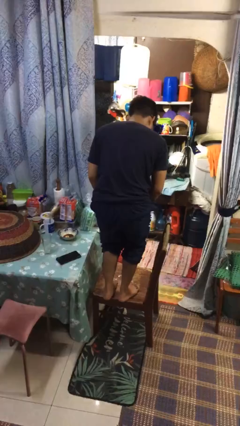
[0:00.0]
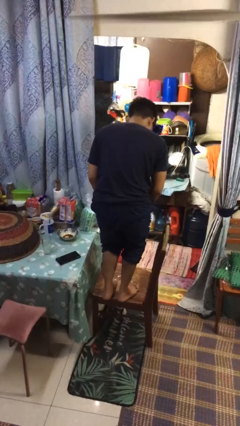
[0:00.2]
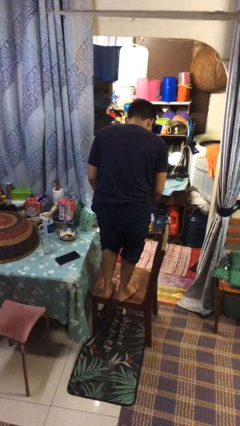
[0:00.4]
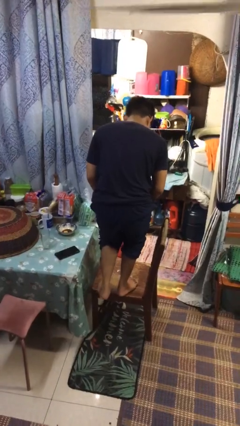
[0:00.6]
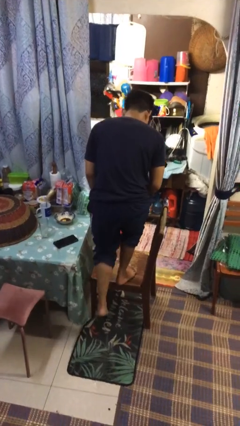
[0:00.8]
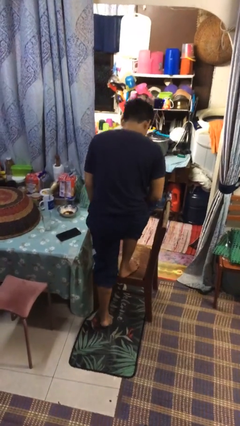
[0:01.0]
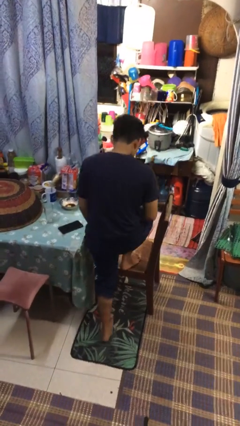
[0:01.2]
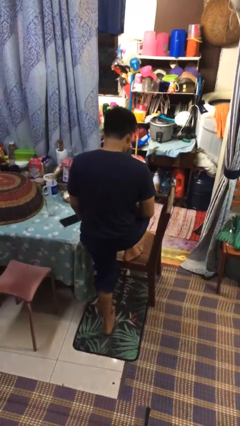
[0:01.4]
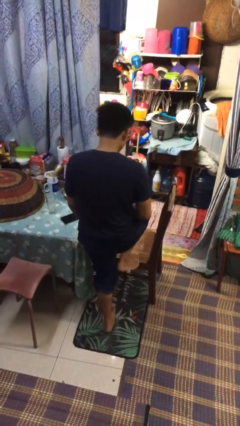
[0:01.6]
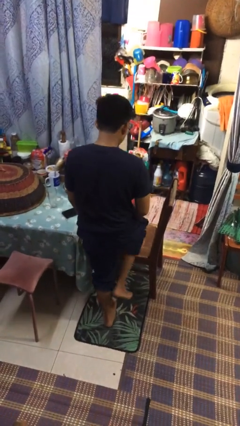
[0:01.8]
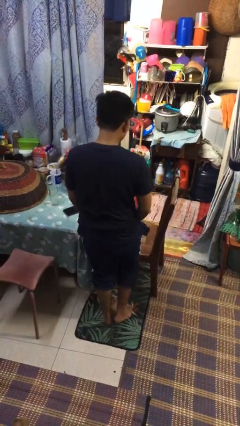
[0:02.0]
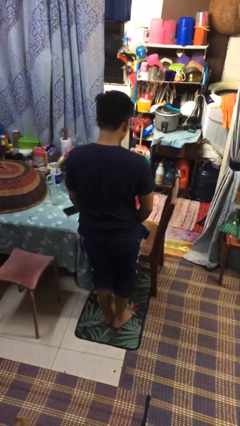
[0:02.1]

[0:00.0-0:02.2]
person climbs off chair

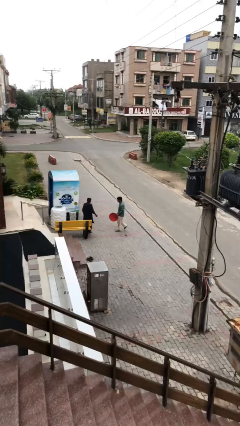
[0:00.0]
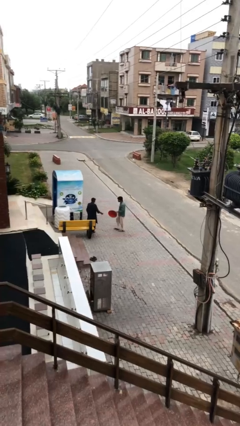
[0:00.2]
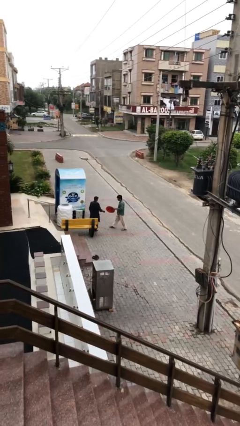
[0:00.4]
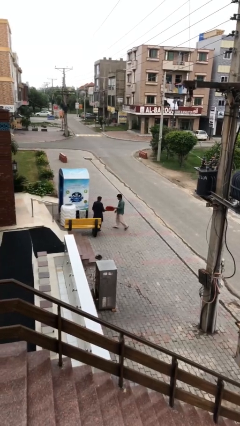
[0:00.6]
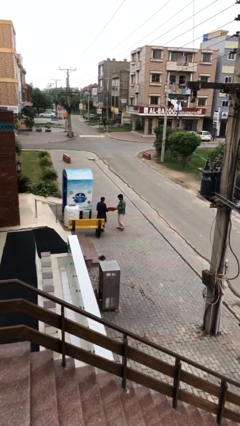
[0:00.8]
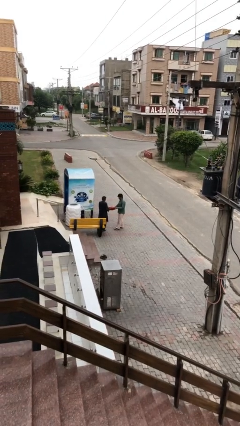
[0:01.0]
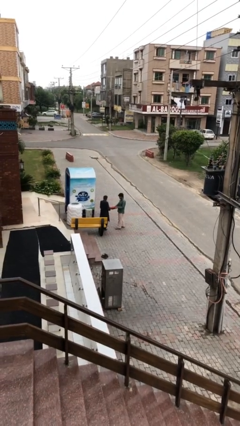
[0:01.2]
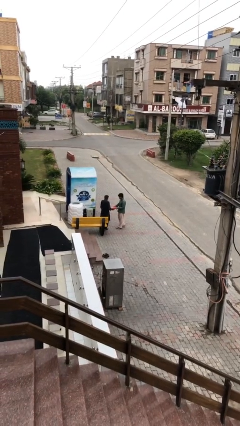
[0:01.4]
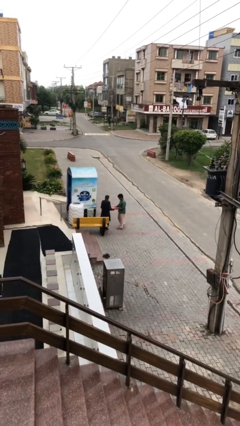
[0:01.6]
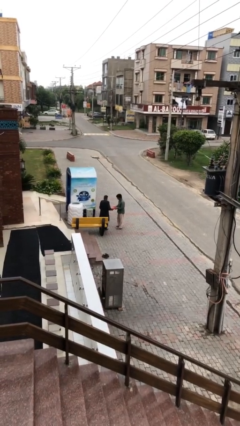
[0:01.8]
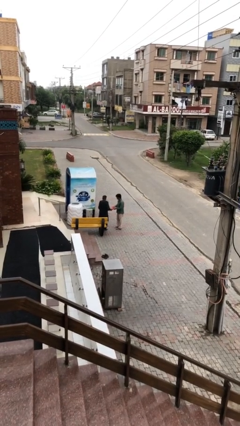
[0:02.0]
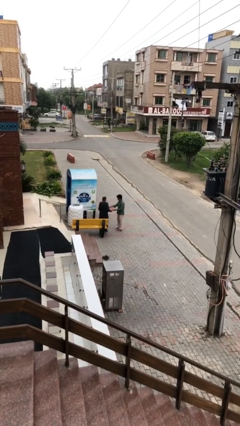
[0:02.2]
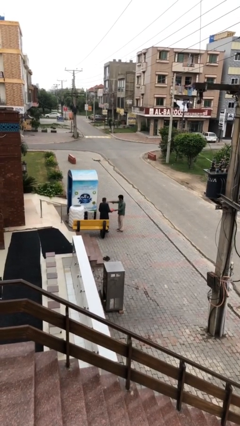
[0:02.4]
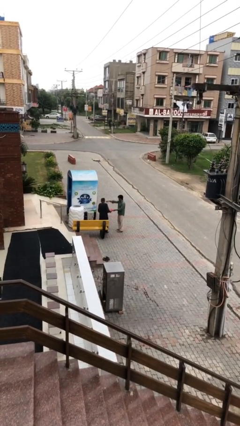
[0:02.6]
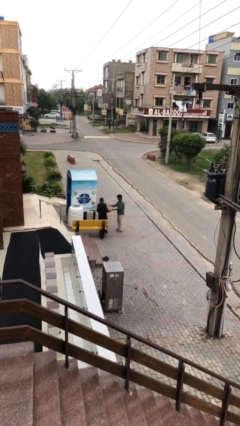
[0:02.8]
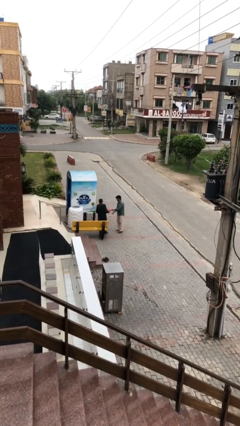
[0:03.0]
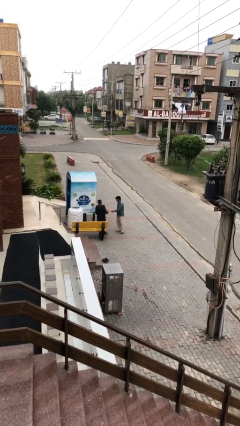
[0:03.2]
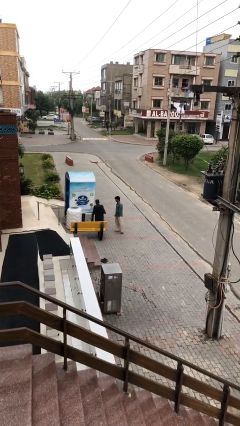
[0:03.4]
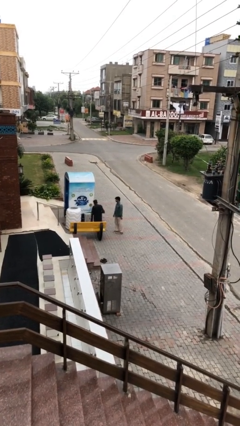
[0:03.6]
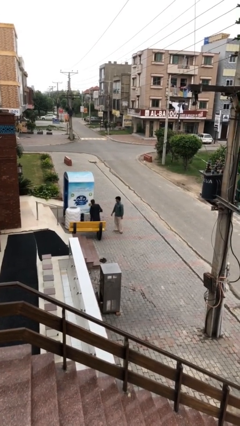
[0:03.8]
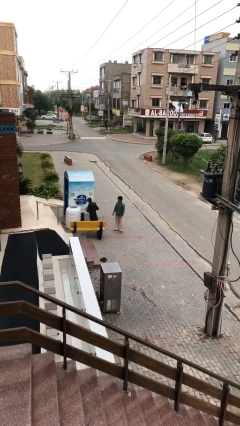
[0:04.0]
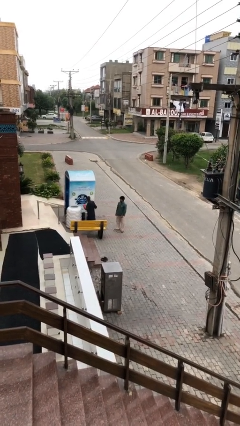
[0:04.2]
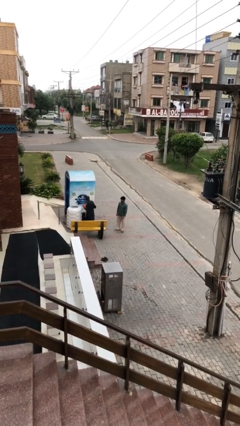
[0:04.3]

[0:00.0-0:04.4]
person transfers object to person

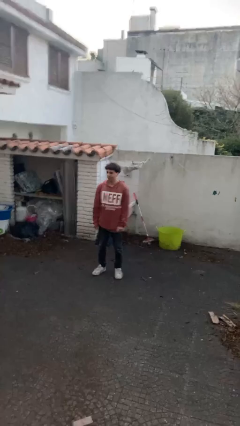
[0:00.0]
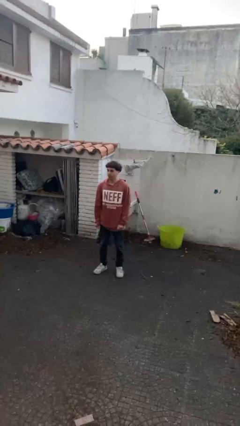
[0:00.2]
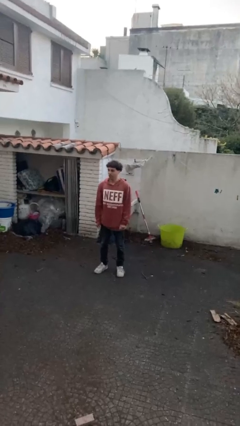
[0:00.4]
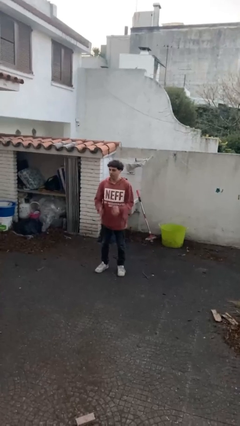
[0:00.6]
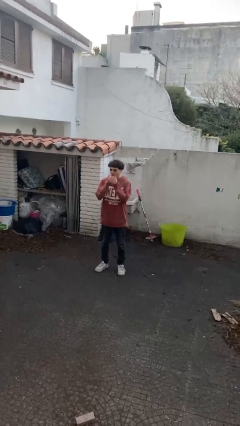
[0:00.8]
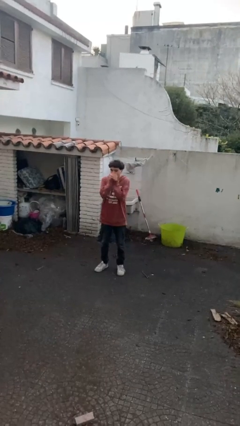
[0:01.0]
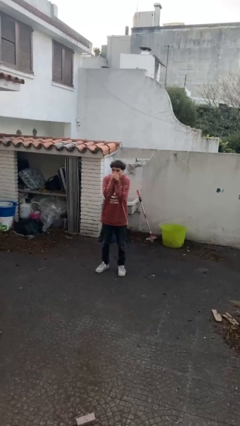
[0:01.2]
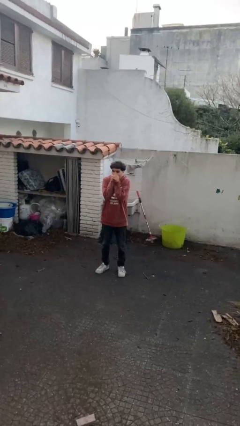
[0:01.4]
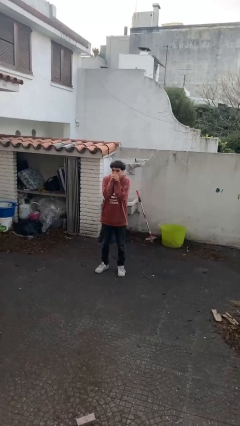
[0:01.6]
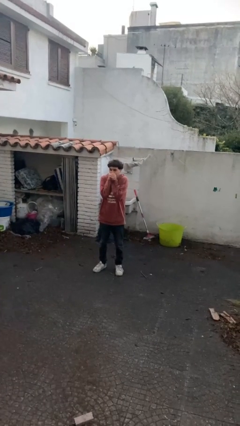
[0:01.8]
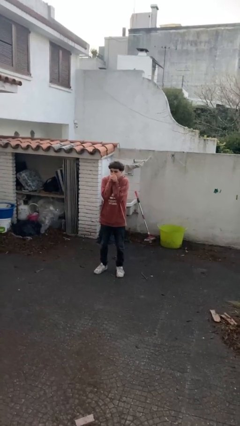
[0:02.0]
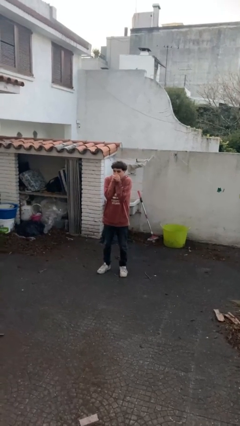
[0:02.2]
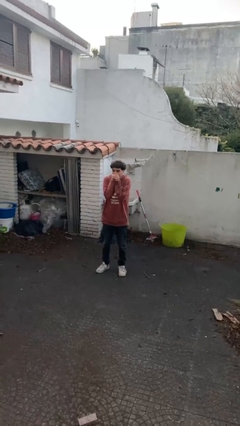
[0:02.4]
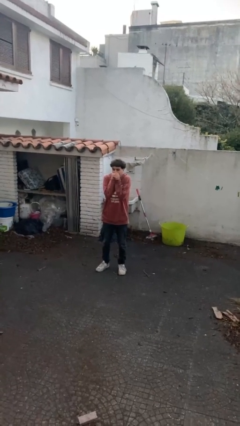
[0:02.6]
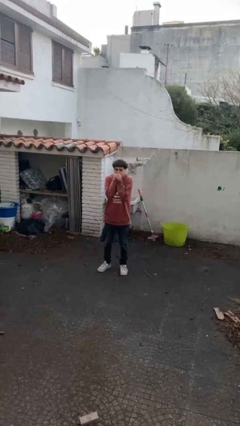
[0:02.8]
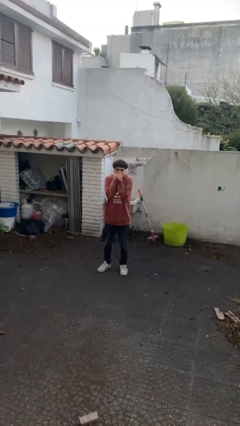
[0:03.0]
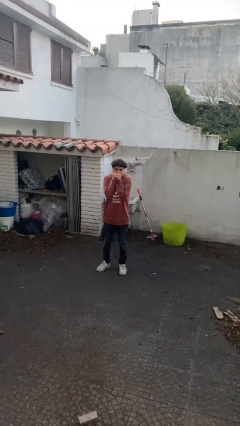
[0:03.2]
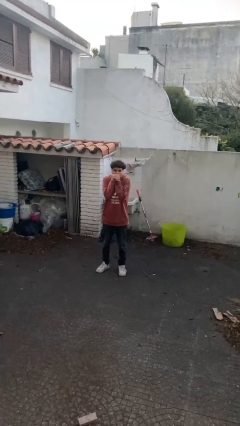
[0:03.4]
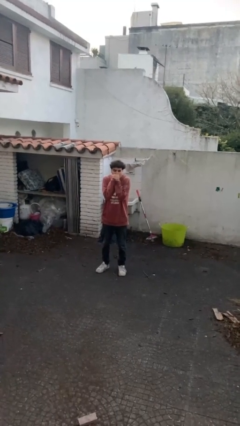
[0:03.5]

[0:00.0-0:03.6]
person blows into hands

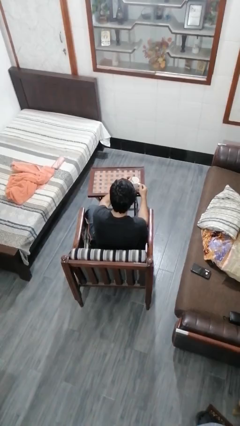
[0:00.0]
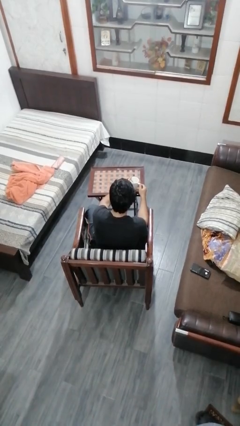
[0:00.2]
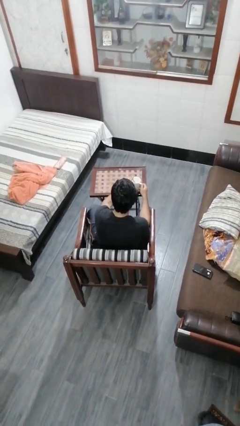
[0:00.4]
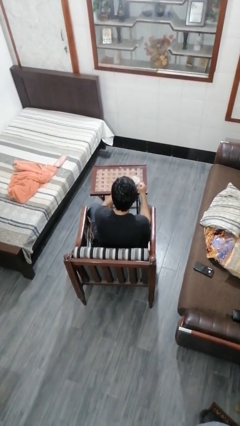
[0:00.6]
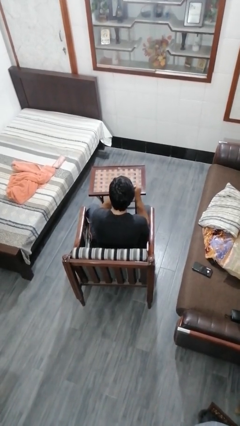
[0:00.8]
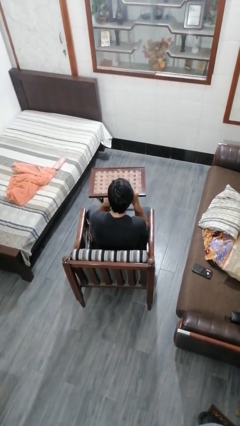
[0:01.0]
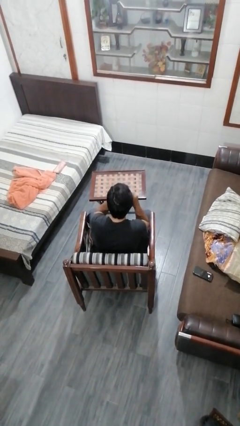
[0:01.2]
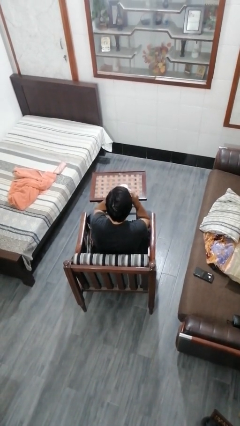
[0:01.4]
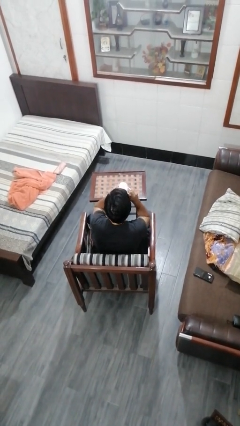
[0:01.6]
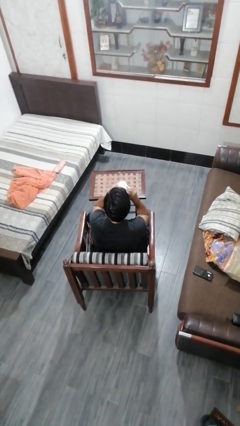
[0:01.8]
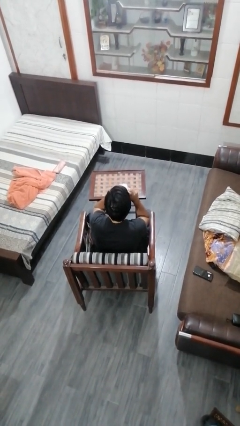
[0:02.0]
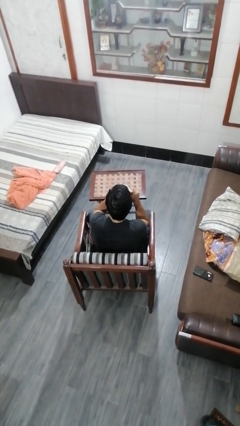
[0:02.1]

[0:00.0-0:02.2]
person drinks from mug

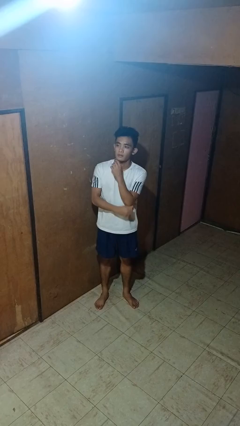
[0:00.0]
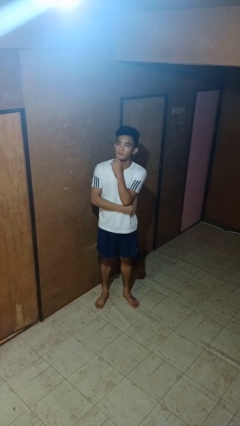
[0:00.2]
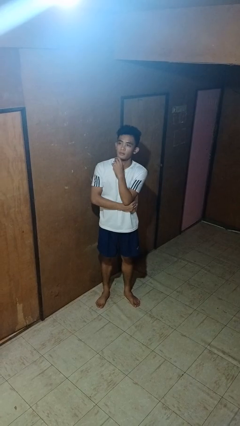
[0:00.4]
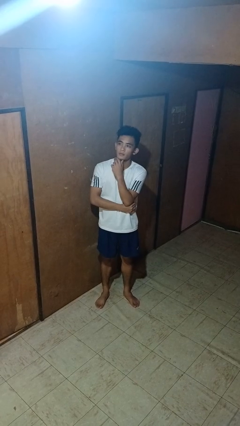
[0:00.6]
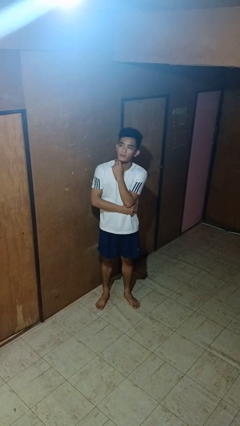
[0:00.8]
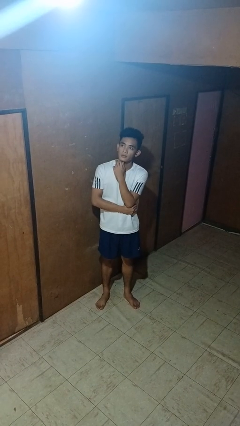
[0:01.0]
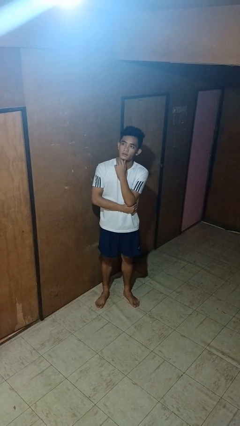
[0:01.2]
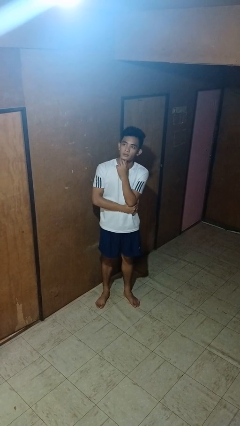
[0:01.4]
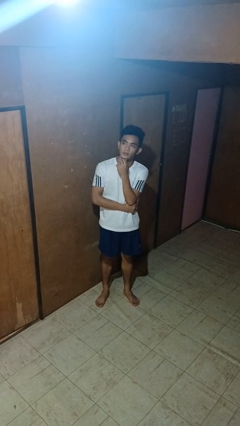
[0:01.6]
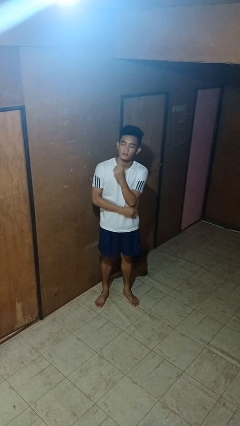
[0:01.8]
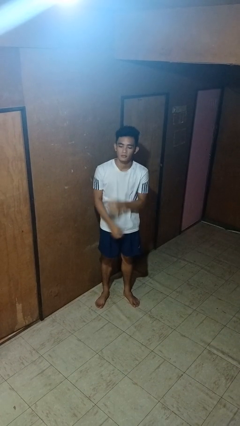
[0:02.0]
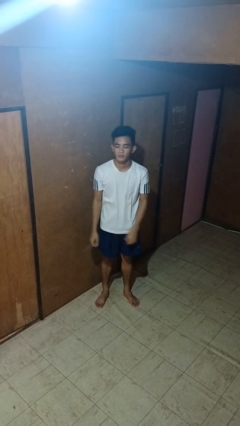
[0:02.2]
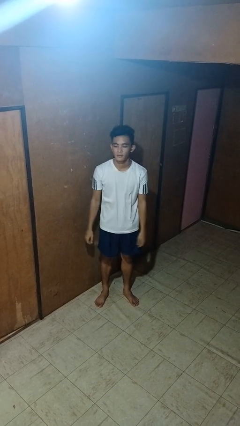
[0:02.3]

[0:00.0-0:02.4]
person strokes chin

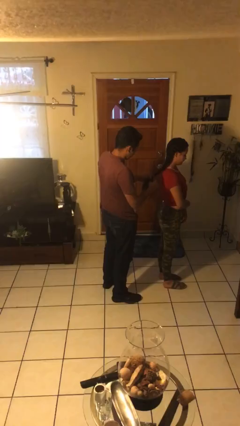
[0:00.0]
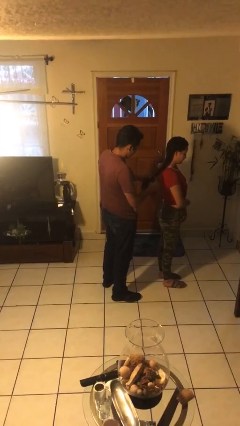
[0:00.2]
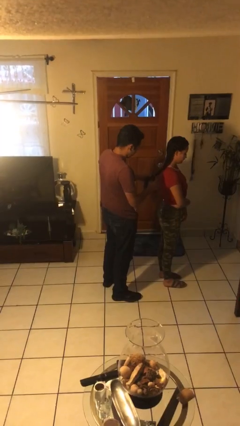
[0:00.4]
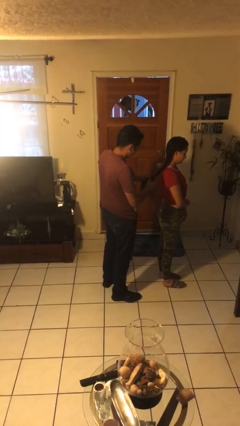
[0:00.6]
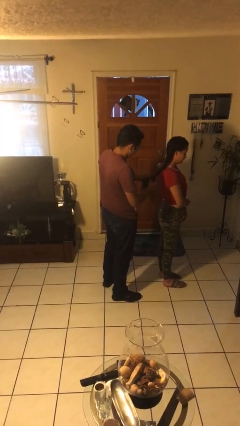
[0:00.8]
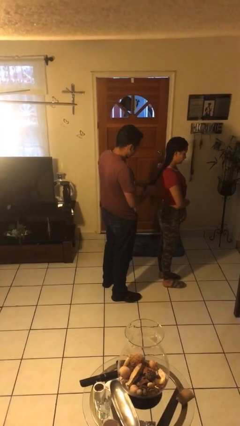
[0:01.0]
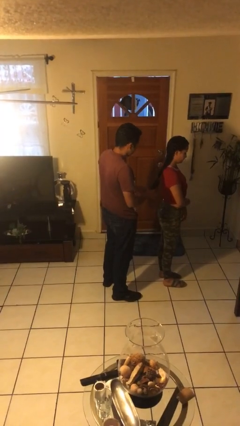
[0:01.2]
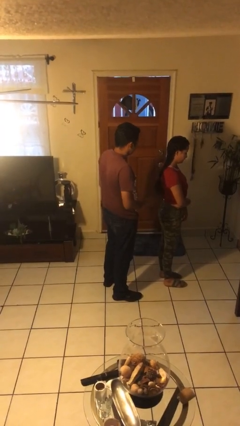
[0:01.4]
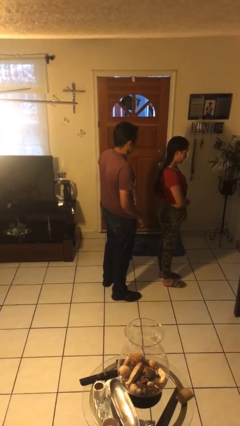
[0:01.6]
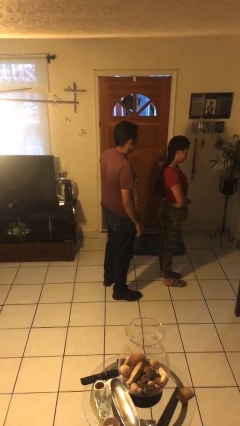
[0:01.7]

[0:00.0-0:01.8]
person braids hair of person

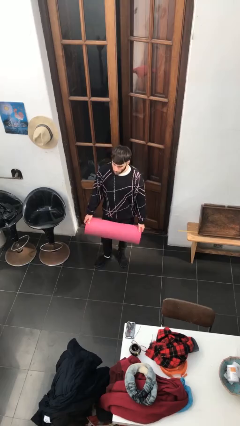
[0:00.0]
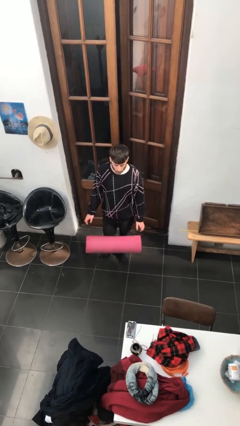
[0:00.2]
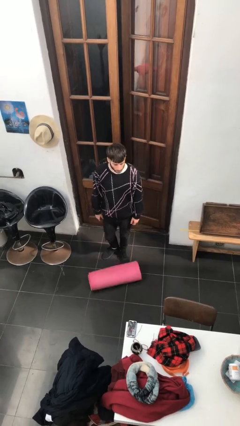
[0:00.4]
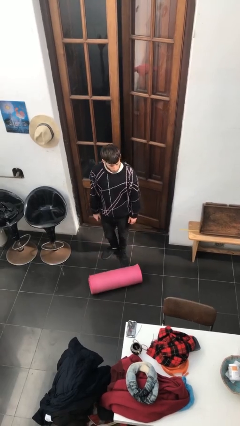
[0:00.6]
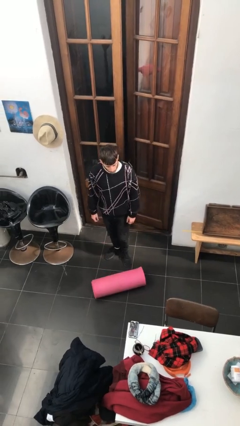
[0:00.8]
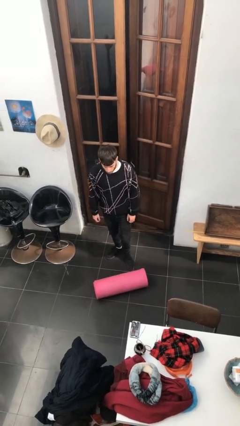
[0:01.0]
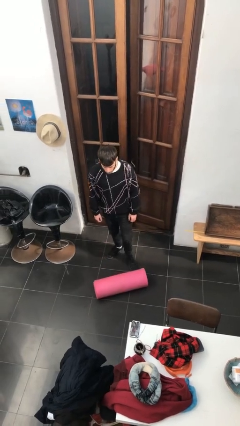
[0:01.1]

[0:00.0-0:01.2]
person drops object
